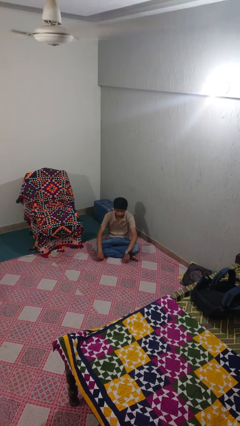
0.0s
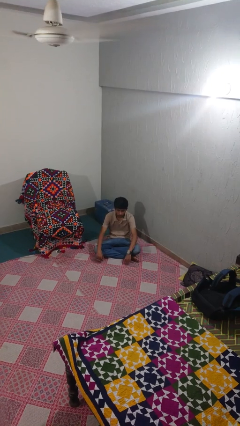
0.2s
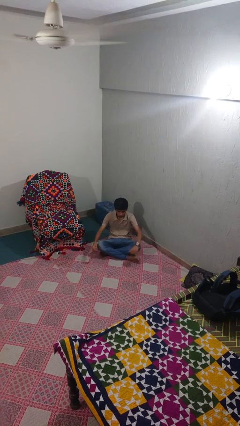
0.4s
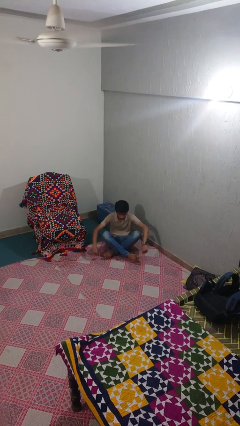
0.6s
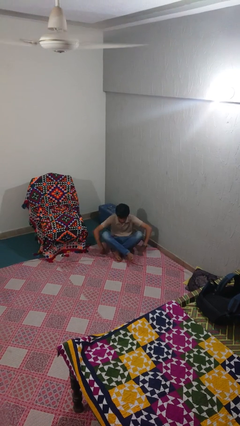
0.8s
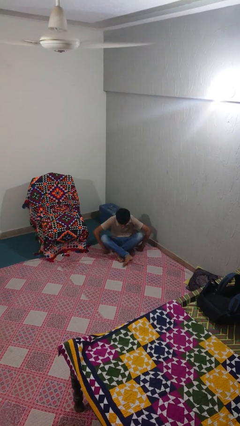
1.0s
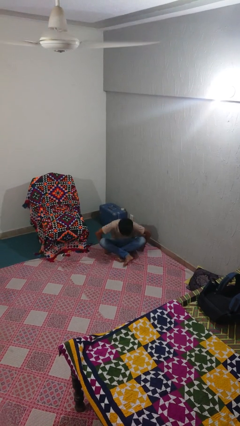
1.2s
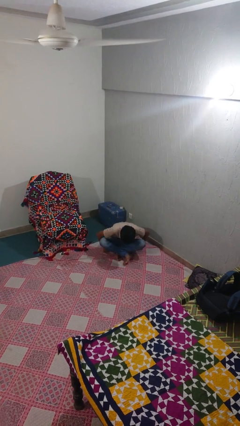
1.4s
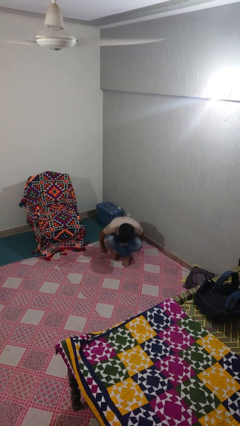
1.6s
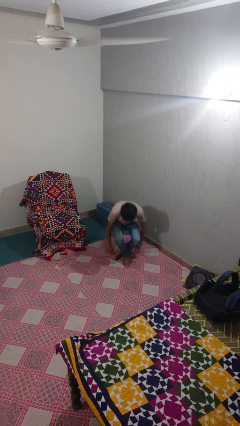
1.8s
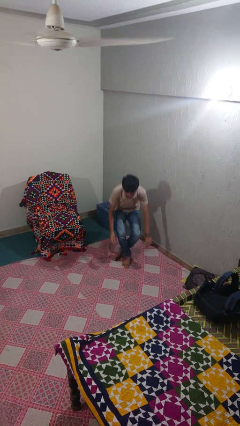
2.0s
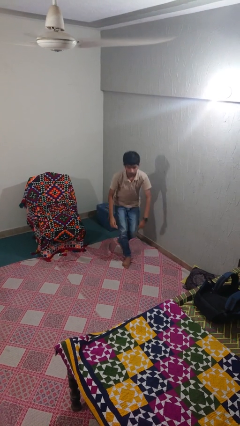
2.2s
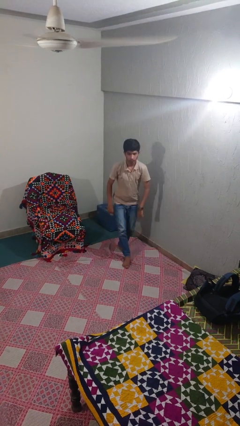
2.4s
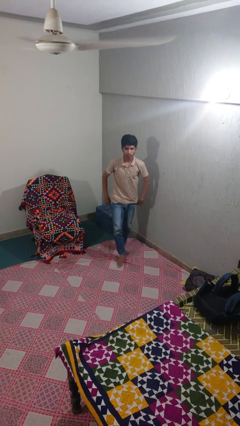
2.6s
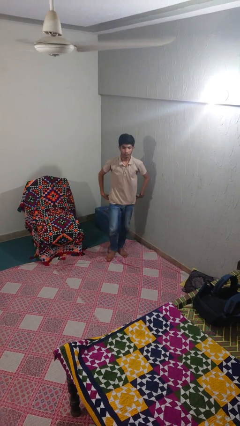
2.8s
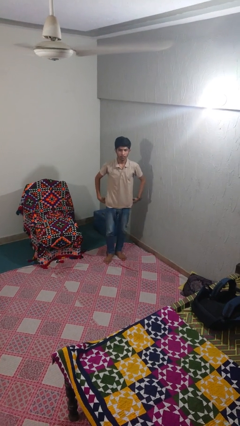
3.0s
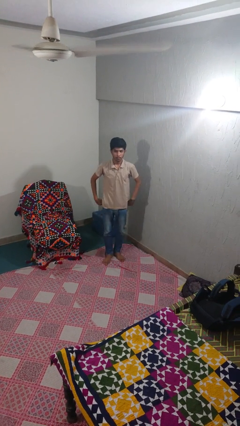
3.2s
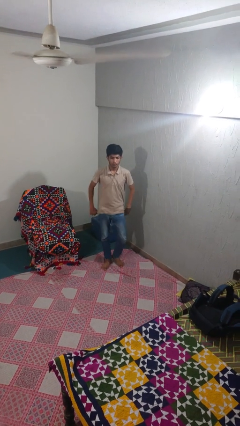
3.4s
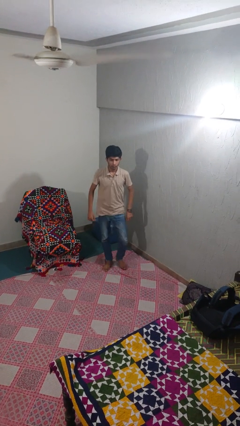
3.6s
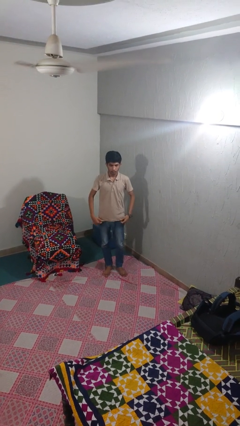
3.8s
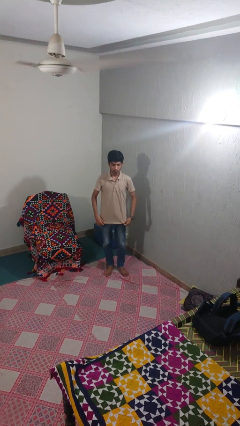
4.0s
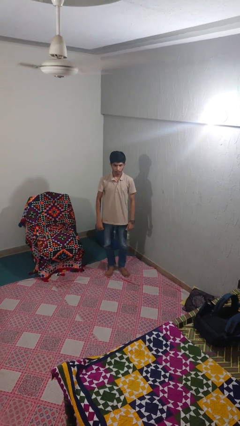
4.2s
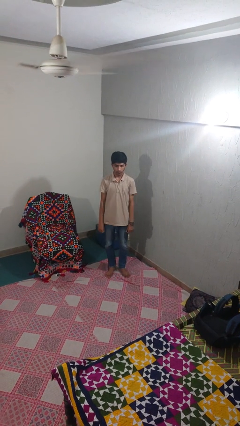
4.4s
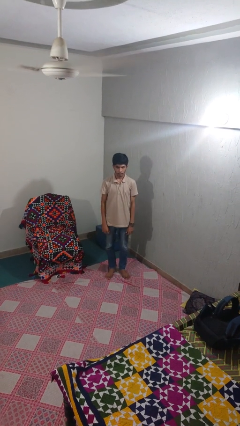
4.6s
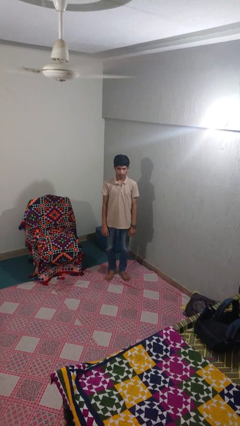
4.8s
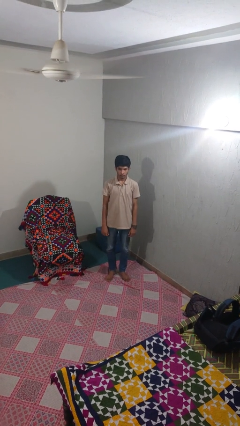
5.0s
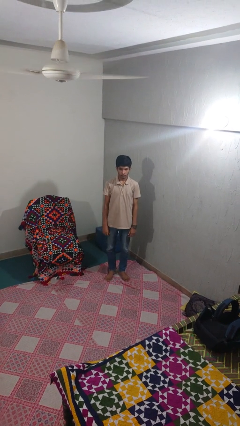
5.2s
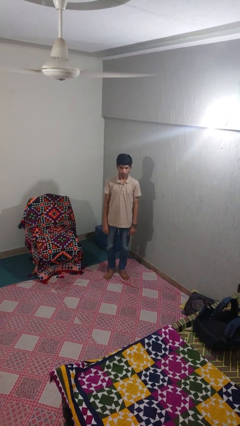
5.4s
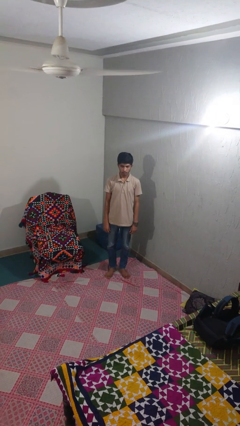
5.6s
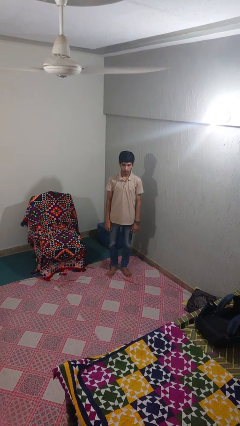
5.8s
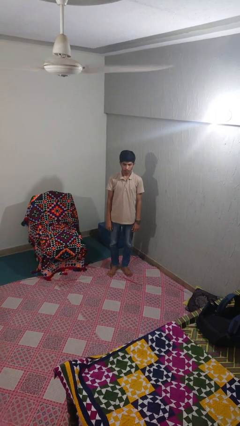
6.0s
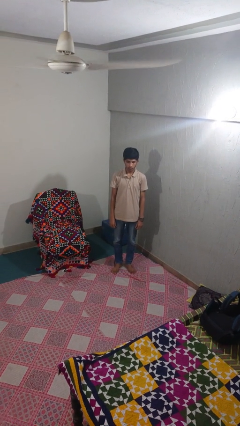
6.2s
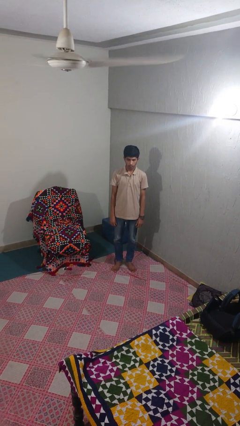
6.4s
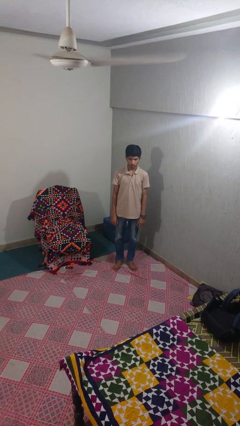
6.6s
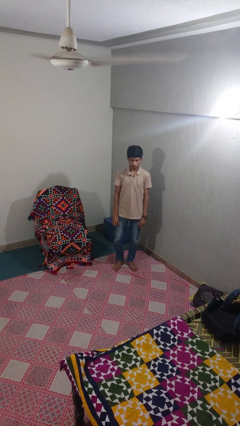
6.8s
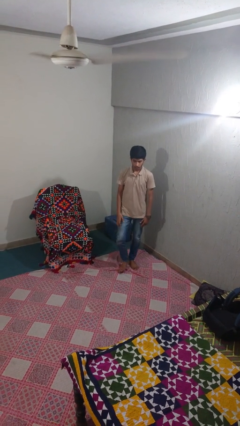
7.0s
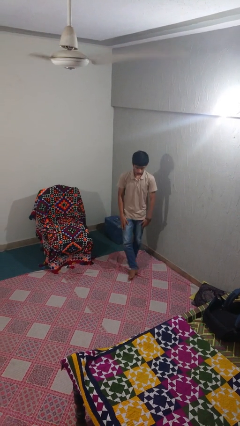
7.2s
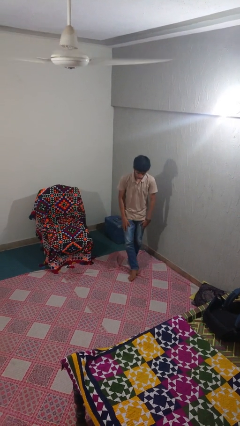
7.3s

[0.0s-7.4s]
person stands up from floor

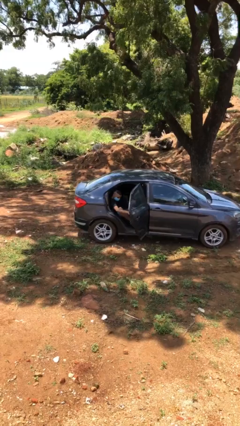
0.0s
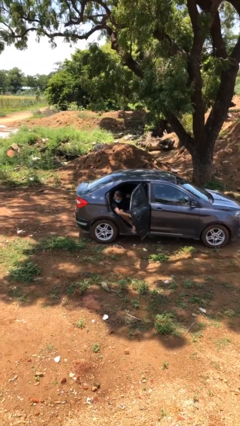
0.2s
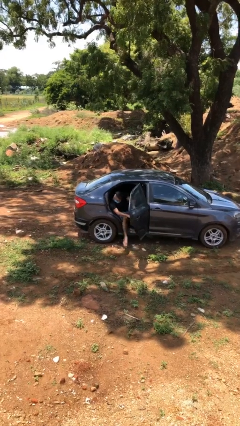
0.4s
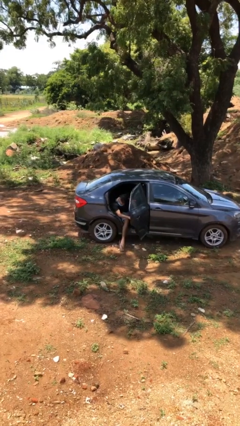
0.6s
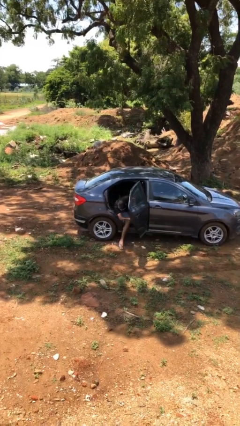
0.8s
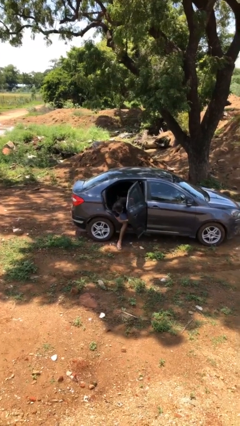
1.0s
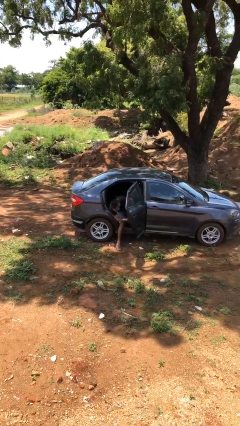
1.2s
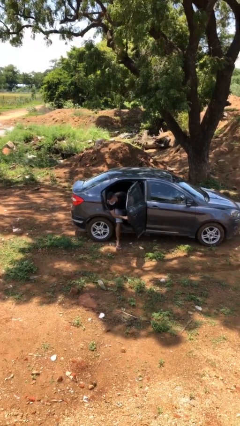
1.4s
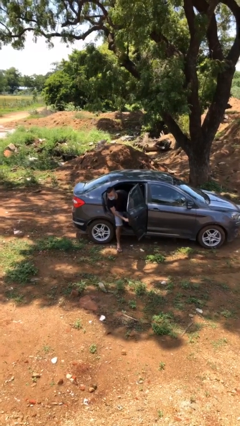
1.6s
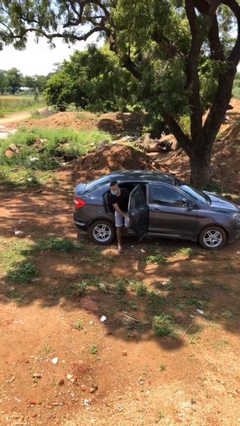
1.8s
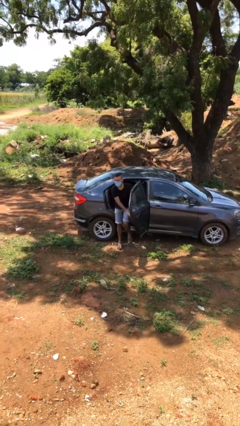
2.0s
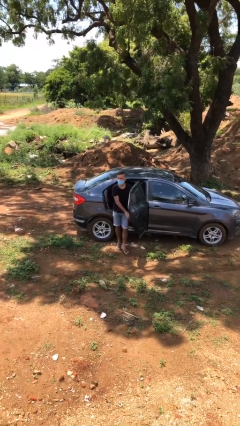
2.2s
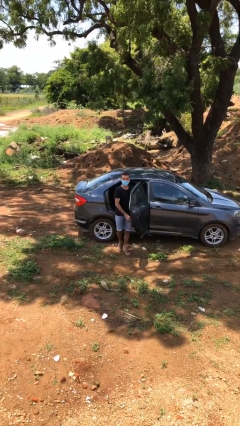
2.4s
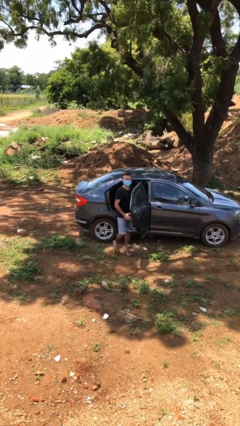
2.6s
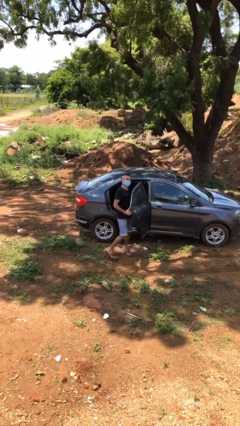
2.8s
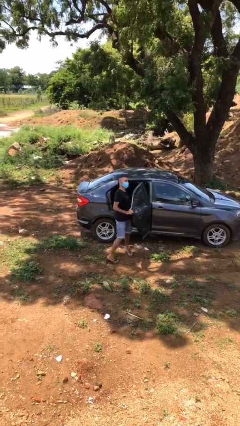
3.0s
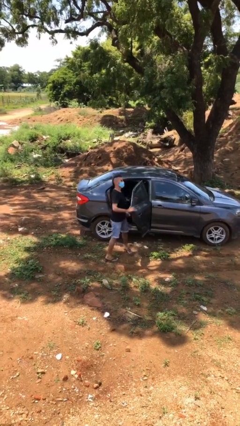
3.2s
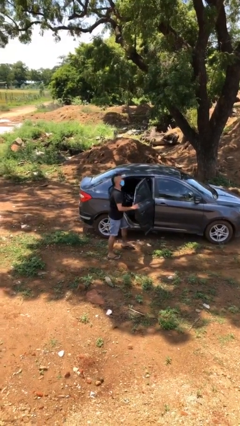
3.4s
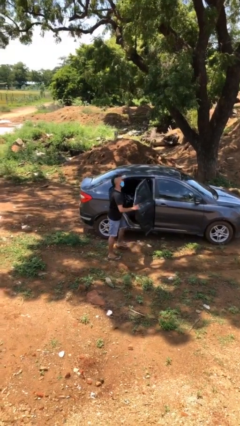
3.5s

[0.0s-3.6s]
person exits car

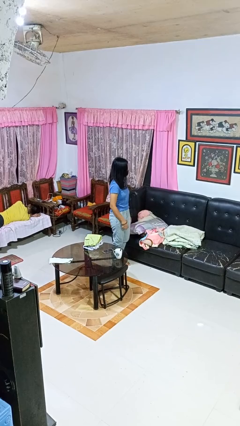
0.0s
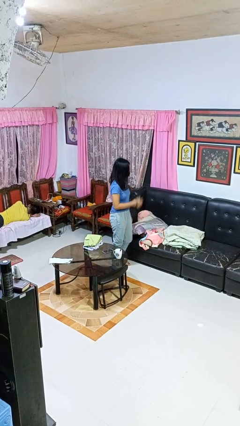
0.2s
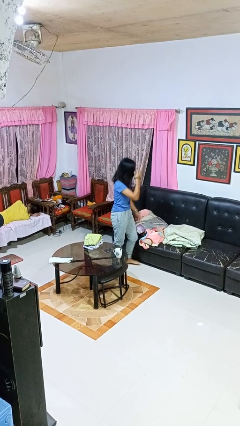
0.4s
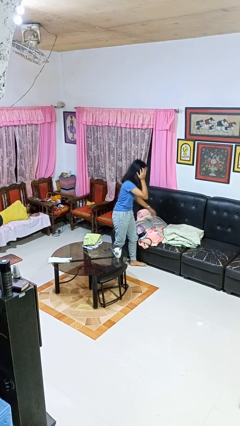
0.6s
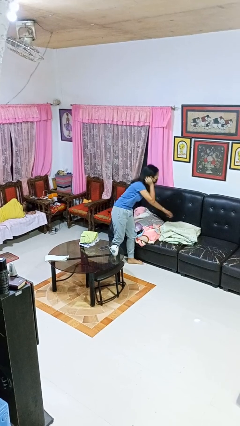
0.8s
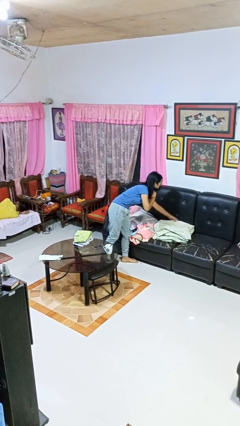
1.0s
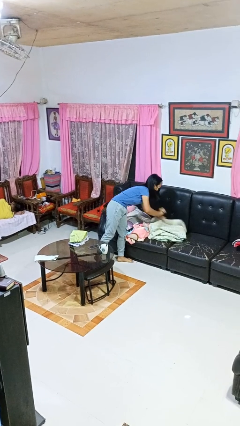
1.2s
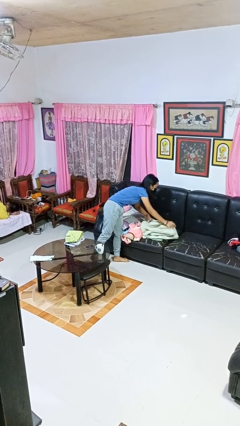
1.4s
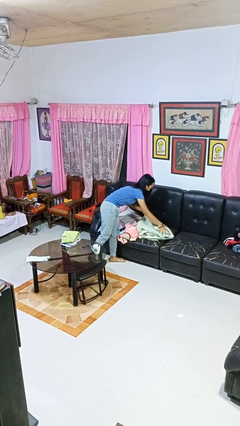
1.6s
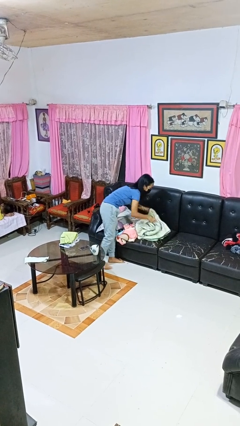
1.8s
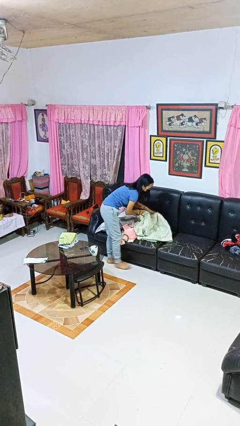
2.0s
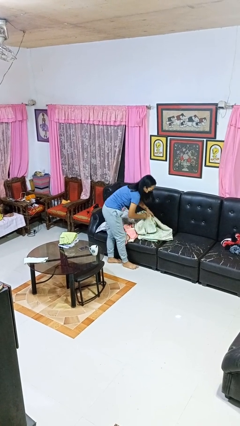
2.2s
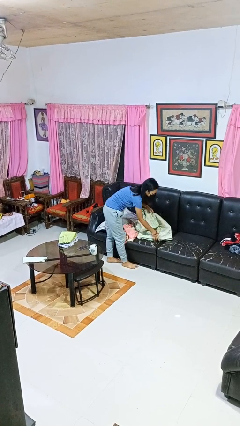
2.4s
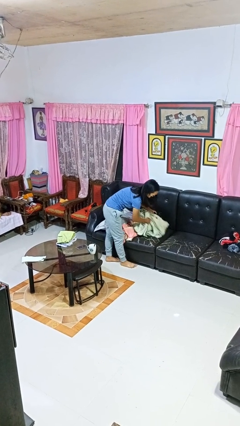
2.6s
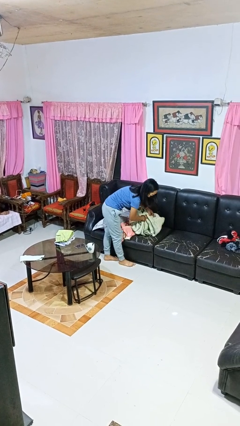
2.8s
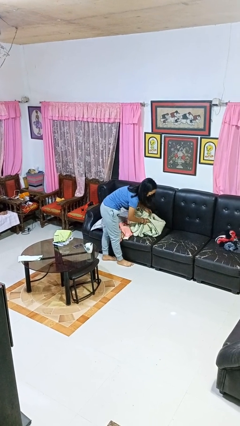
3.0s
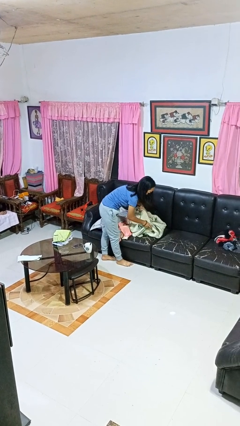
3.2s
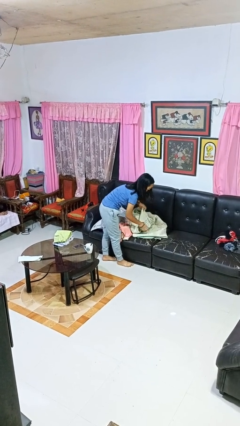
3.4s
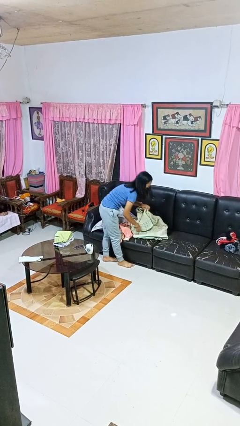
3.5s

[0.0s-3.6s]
person searches in couch

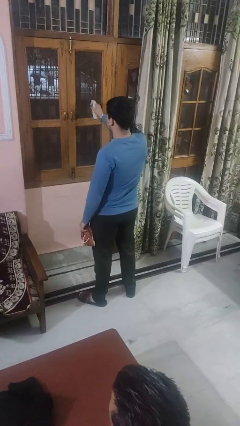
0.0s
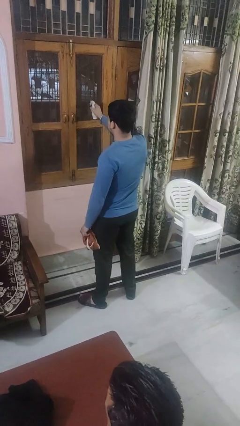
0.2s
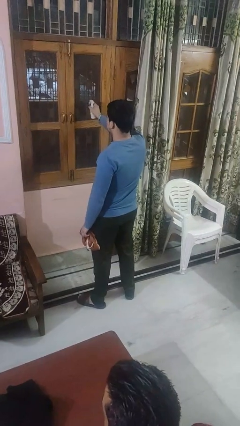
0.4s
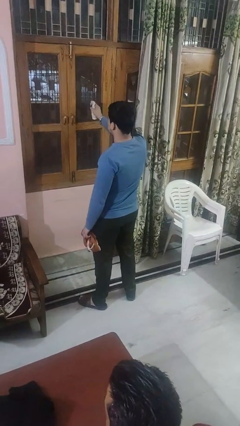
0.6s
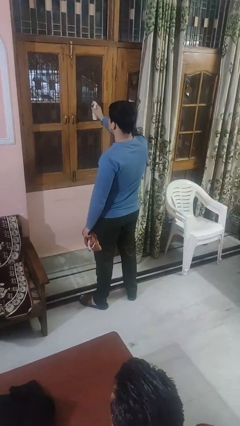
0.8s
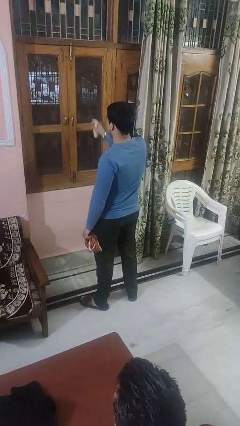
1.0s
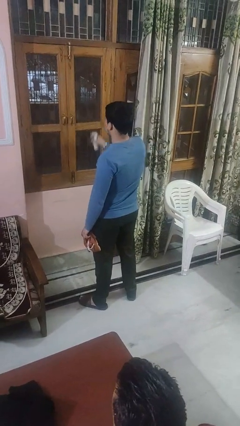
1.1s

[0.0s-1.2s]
person sprays from bottle

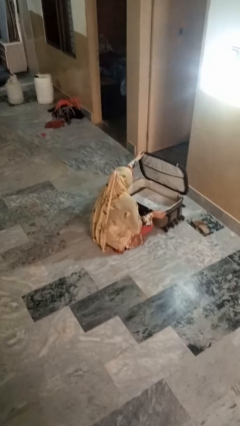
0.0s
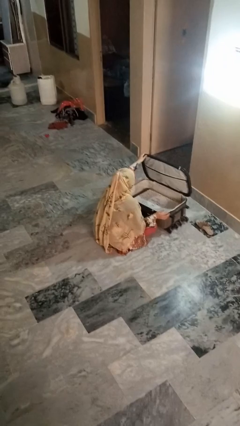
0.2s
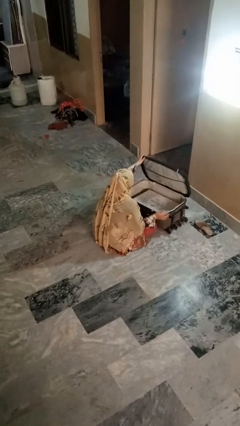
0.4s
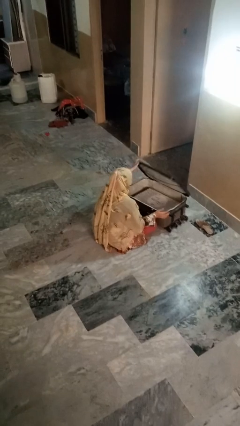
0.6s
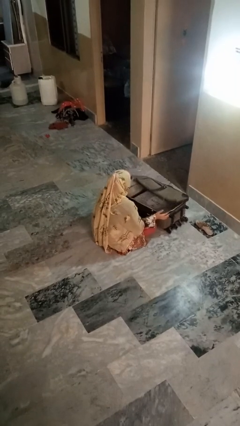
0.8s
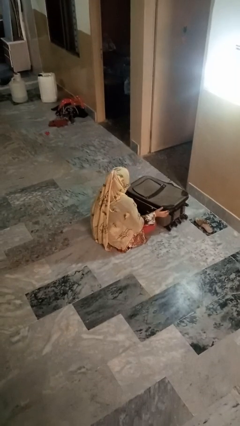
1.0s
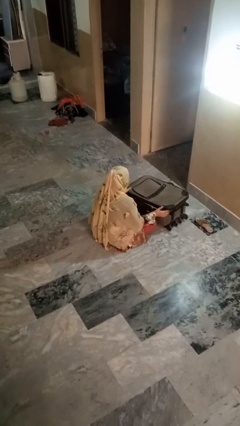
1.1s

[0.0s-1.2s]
person closes suitcase
